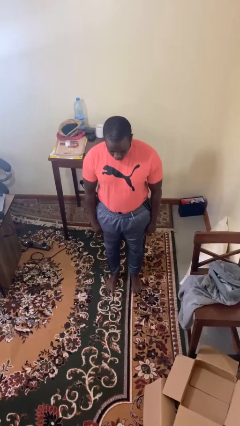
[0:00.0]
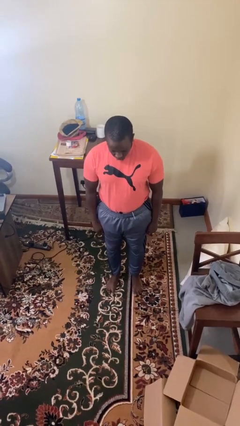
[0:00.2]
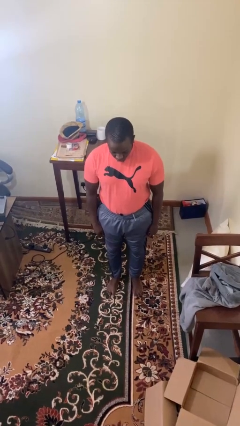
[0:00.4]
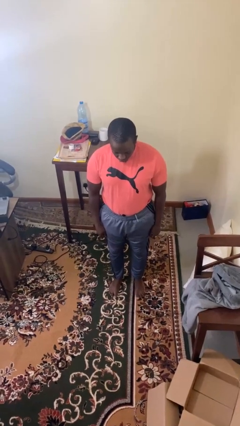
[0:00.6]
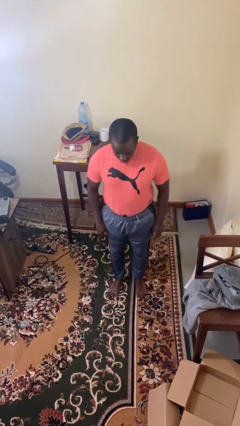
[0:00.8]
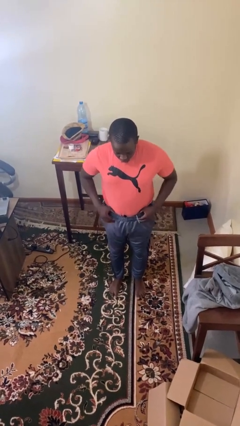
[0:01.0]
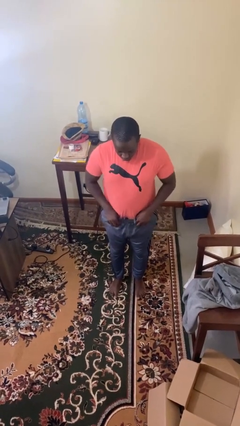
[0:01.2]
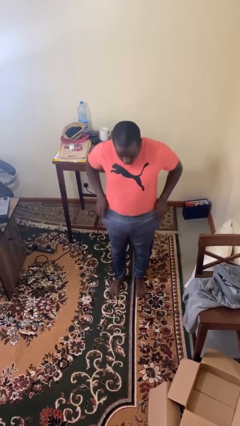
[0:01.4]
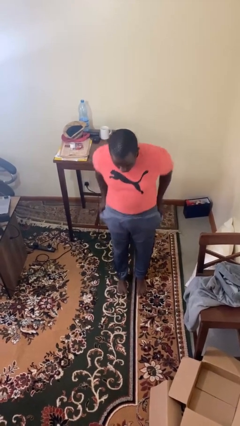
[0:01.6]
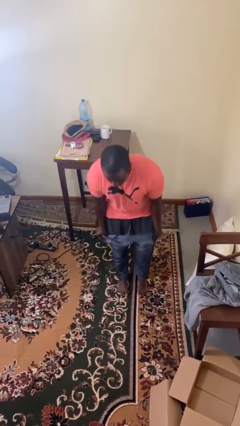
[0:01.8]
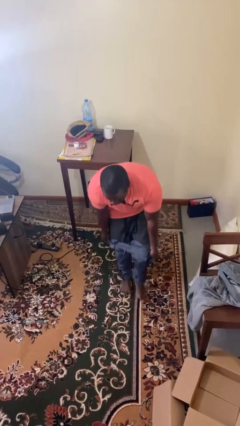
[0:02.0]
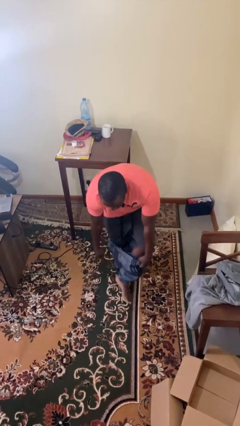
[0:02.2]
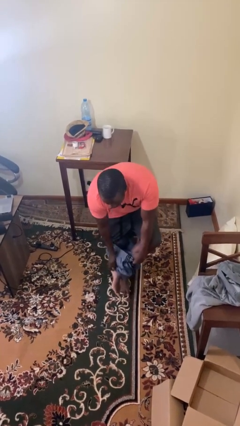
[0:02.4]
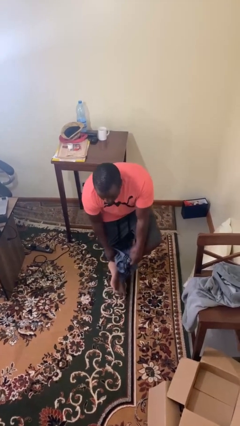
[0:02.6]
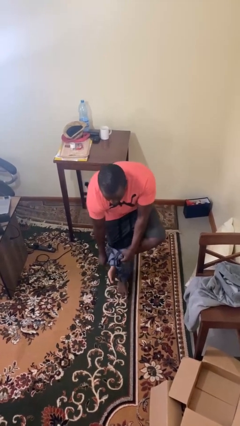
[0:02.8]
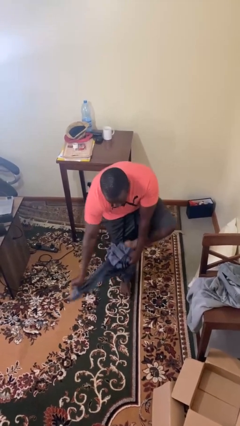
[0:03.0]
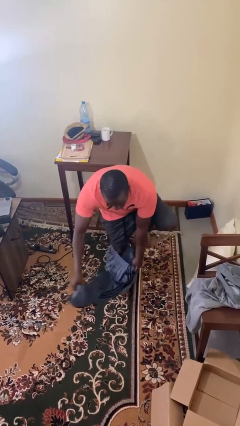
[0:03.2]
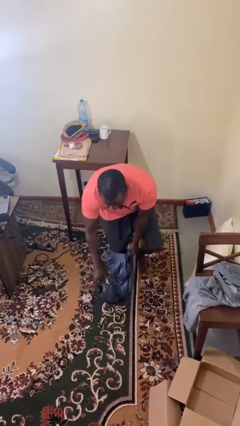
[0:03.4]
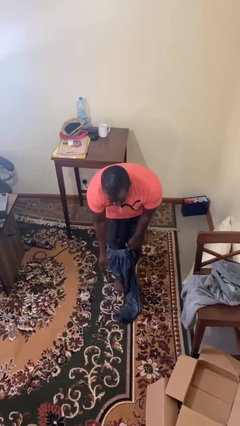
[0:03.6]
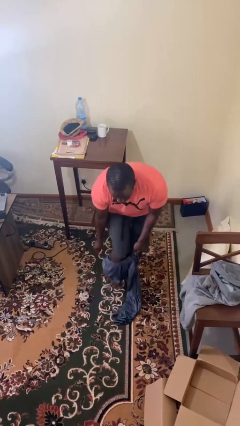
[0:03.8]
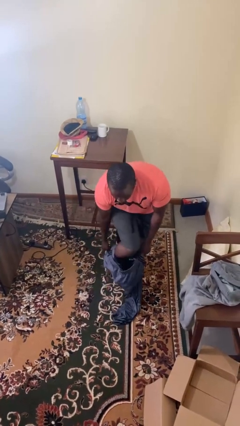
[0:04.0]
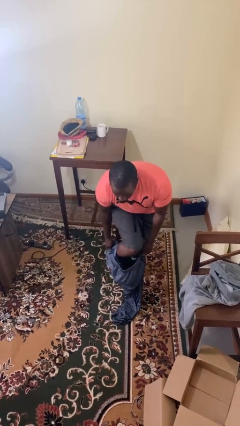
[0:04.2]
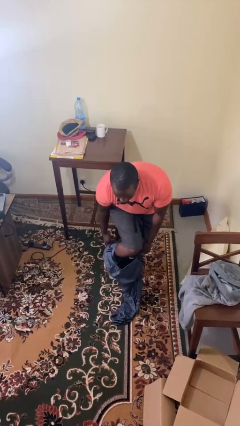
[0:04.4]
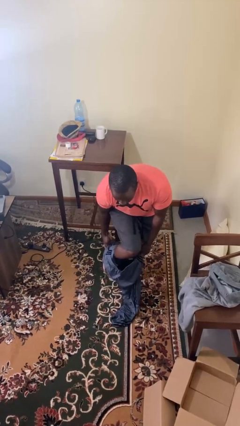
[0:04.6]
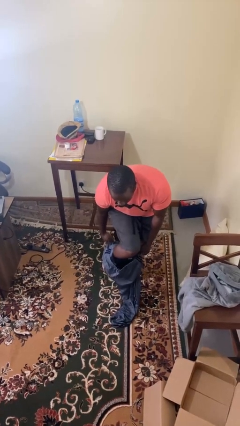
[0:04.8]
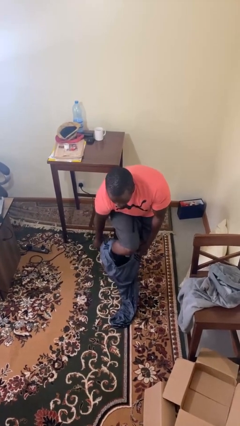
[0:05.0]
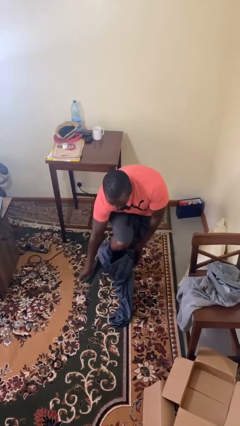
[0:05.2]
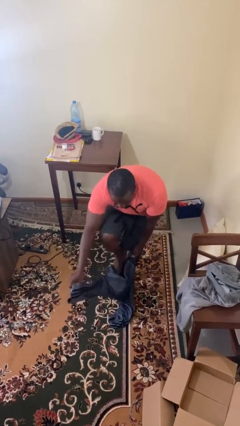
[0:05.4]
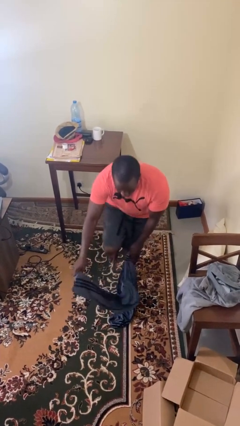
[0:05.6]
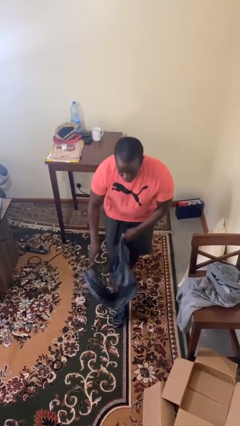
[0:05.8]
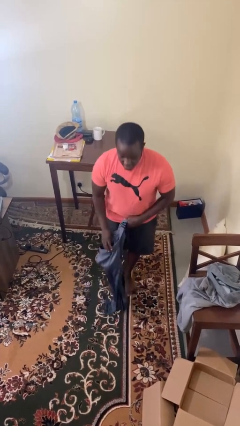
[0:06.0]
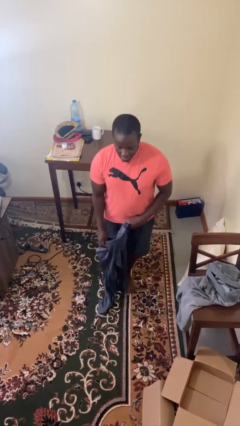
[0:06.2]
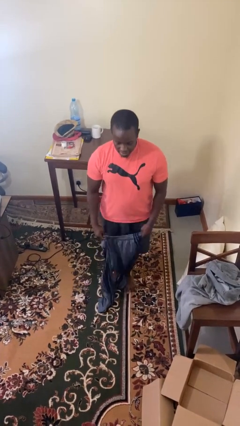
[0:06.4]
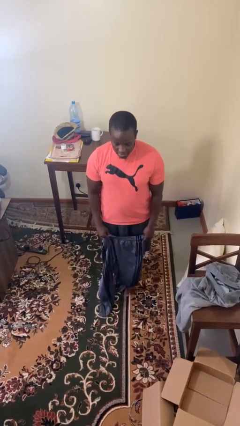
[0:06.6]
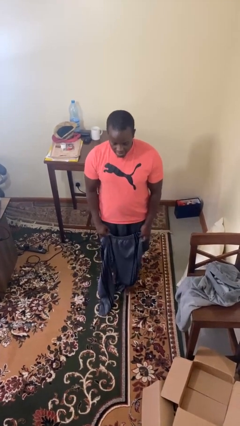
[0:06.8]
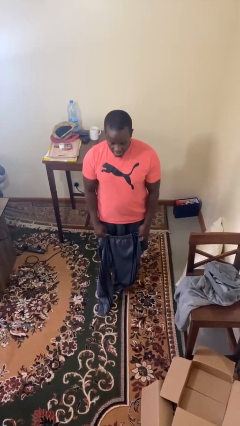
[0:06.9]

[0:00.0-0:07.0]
person takes off pants

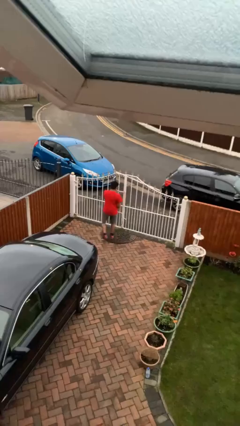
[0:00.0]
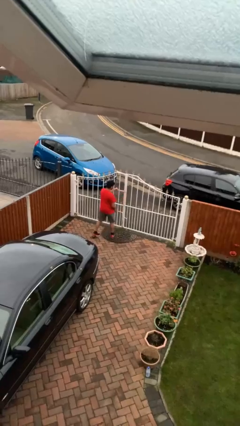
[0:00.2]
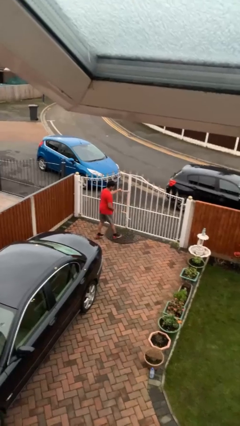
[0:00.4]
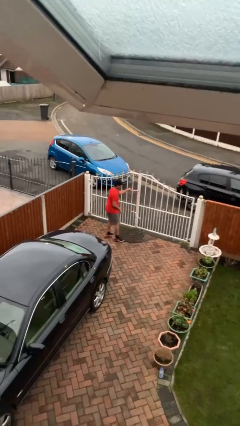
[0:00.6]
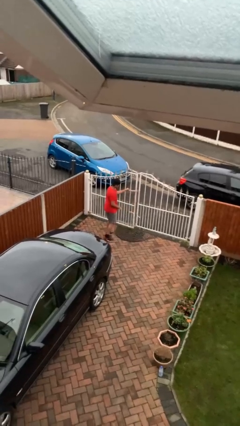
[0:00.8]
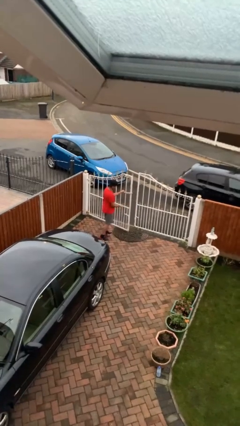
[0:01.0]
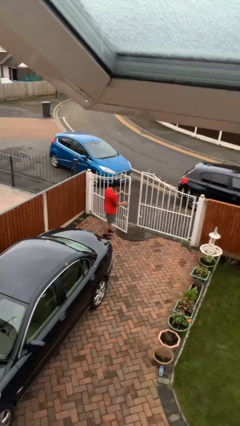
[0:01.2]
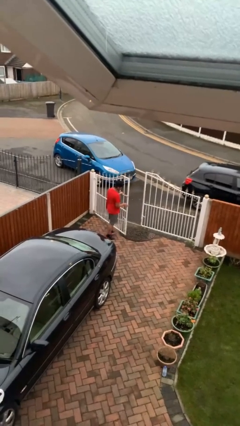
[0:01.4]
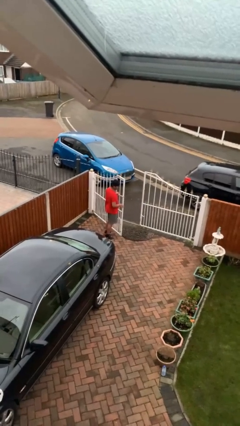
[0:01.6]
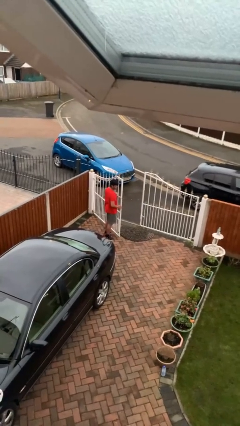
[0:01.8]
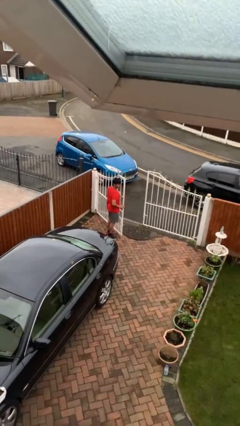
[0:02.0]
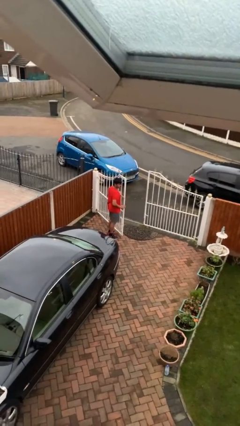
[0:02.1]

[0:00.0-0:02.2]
person opens facility door

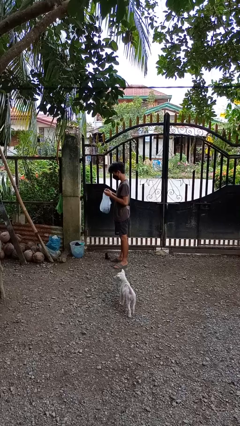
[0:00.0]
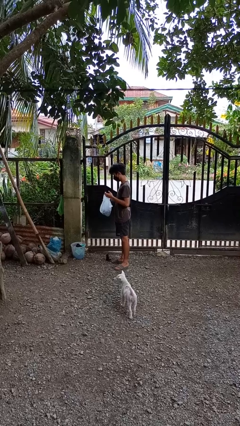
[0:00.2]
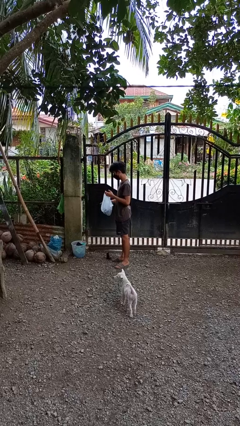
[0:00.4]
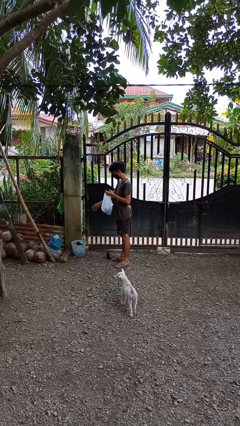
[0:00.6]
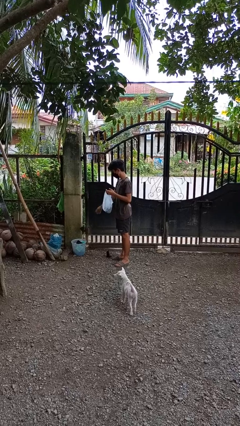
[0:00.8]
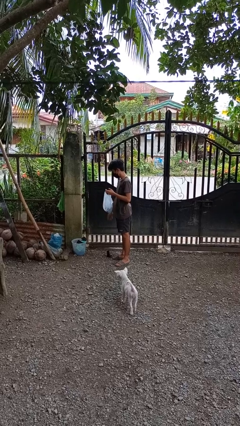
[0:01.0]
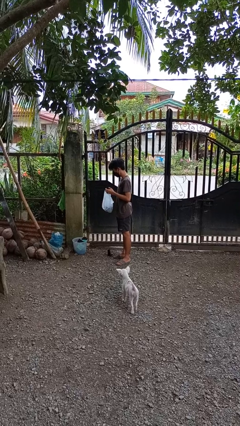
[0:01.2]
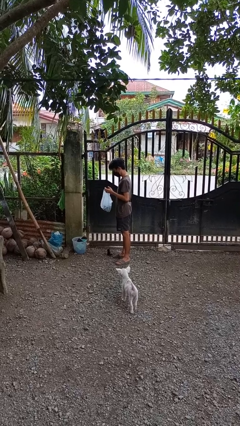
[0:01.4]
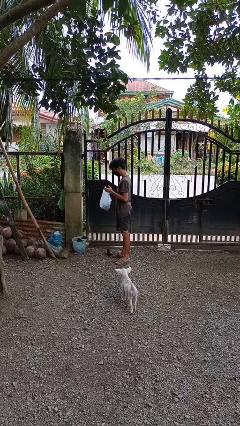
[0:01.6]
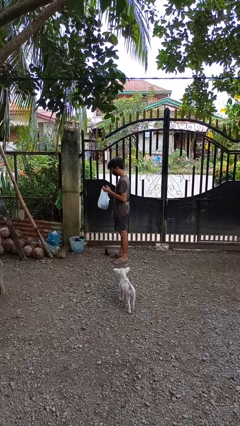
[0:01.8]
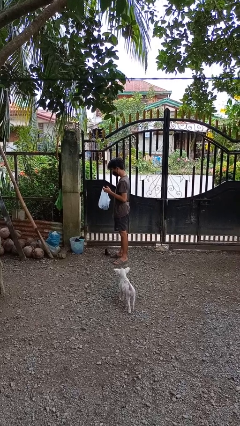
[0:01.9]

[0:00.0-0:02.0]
person discards trash

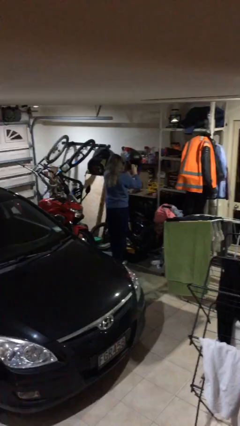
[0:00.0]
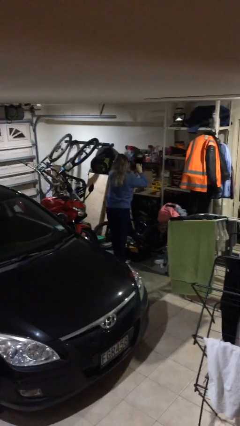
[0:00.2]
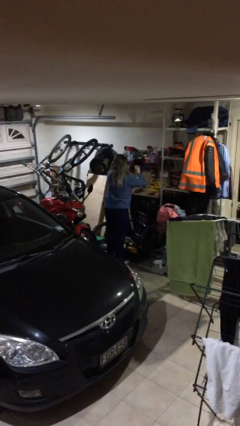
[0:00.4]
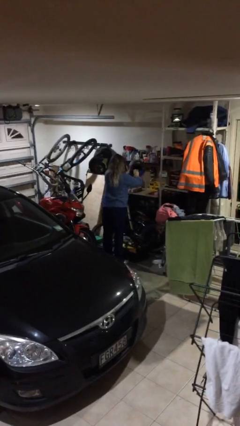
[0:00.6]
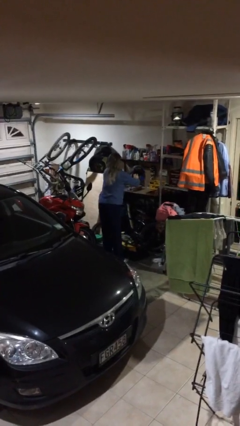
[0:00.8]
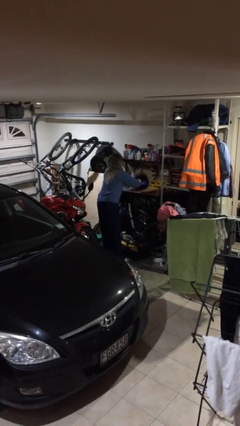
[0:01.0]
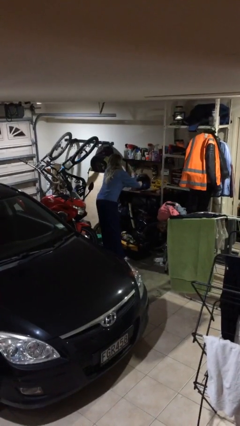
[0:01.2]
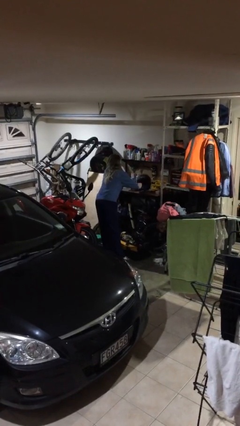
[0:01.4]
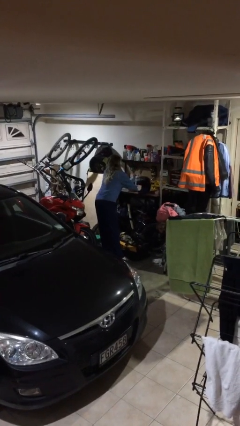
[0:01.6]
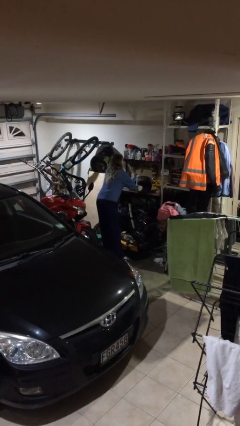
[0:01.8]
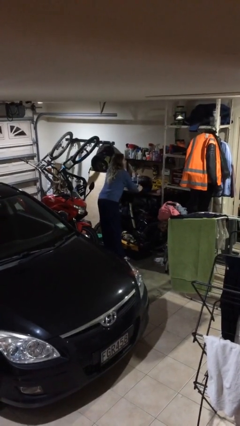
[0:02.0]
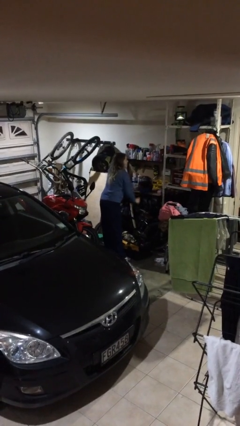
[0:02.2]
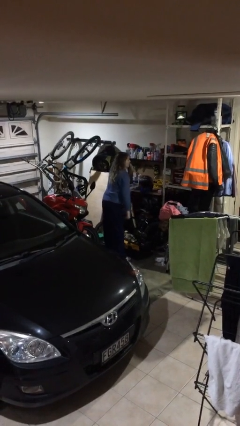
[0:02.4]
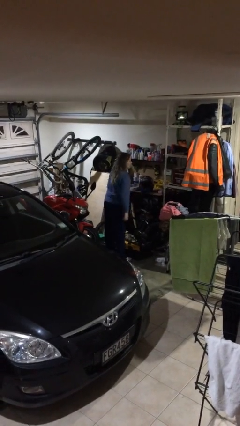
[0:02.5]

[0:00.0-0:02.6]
person puts down object on table

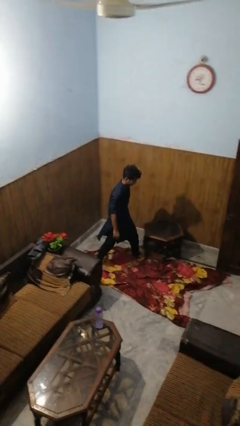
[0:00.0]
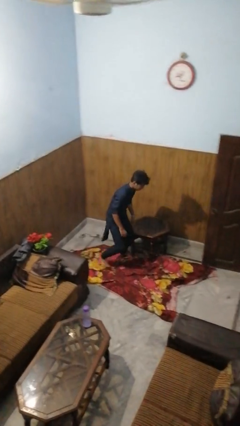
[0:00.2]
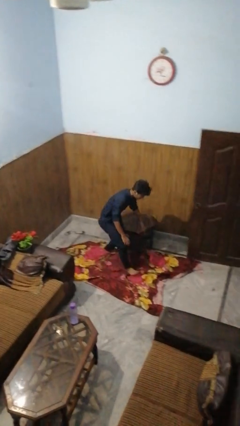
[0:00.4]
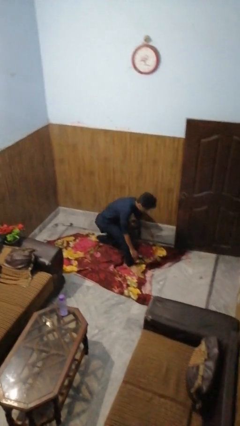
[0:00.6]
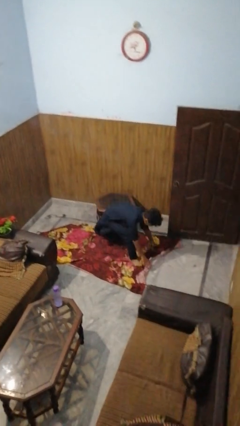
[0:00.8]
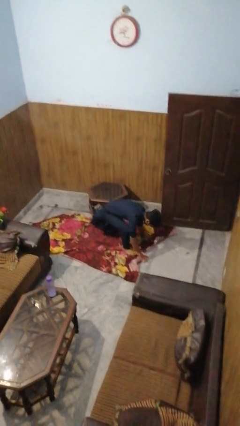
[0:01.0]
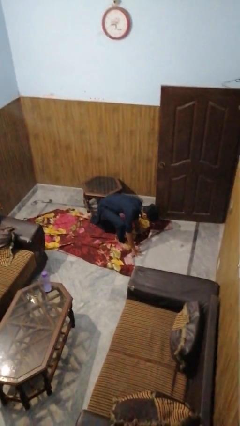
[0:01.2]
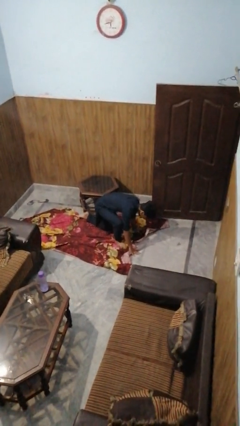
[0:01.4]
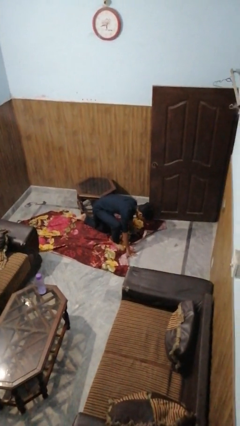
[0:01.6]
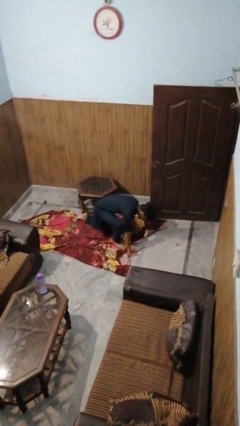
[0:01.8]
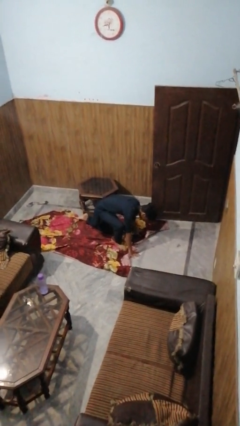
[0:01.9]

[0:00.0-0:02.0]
person bumps into table

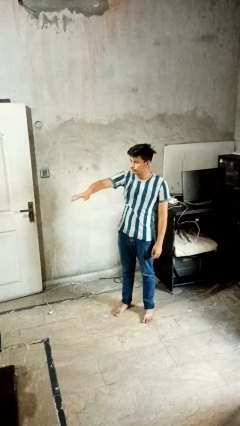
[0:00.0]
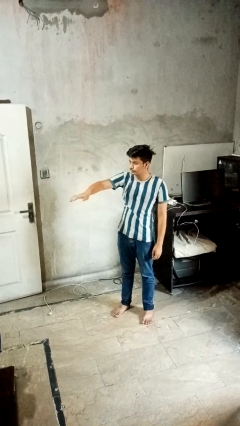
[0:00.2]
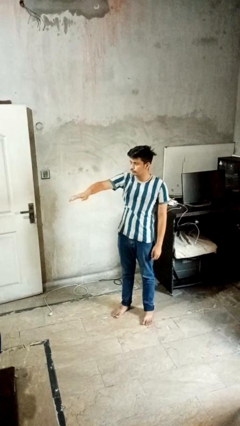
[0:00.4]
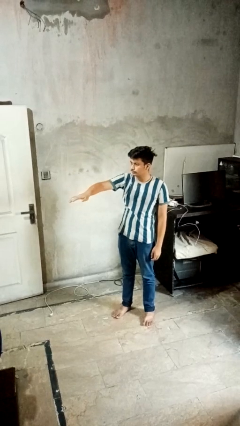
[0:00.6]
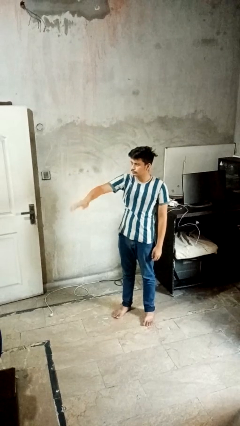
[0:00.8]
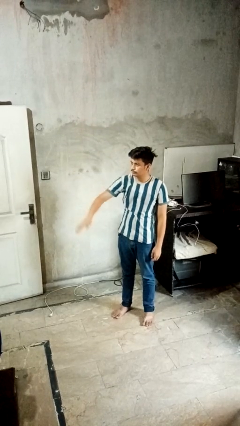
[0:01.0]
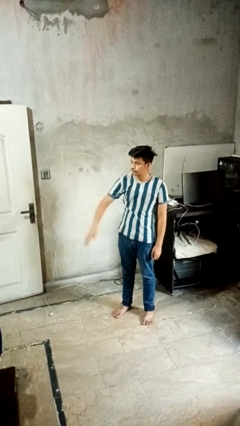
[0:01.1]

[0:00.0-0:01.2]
person gestures swipe down
